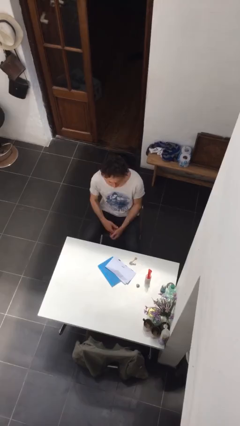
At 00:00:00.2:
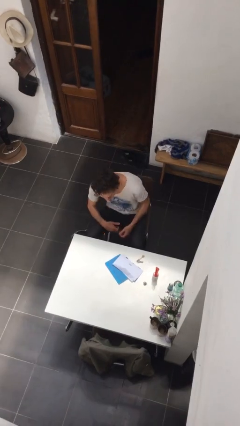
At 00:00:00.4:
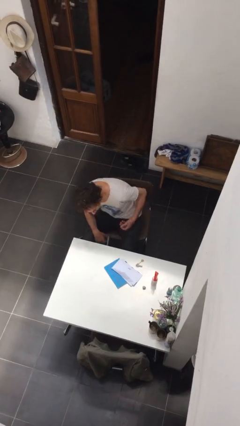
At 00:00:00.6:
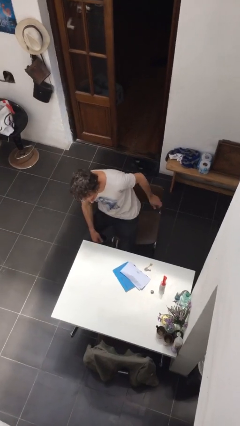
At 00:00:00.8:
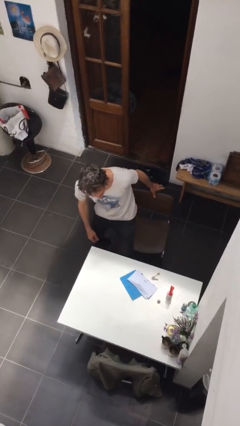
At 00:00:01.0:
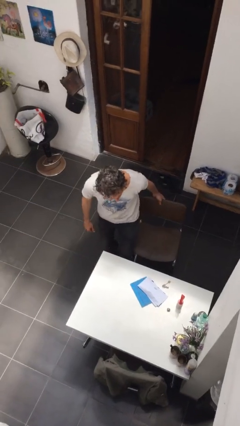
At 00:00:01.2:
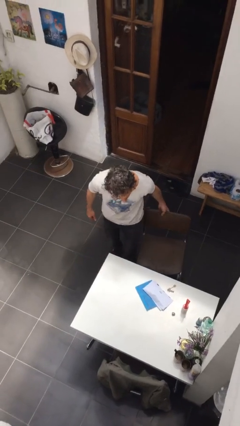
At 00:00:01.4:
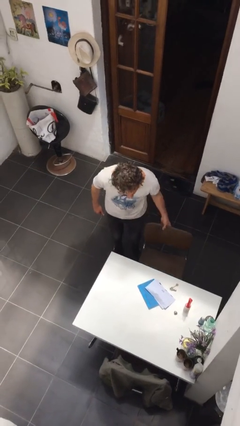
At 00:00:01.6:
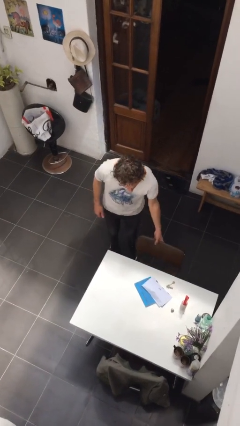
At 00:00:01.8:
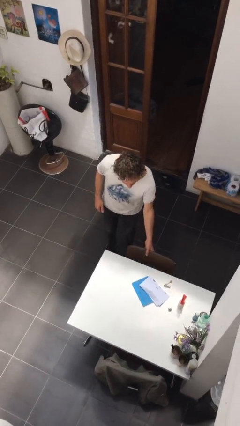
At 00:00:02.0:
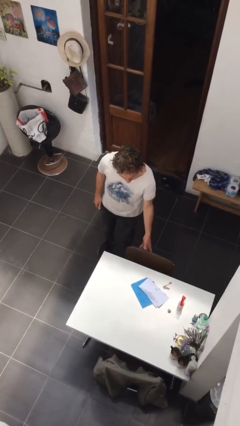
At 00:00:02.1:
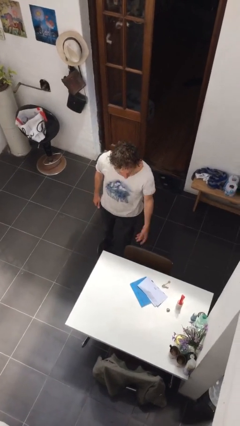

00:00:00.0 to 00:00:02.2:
person stands up

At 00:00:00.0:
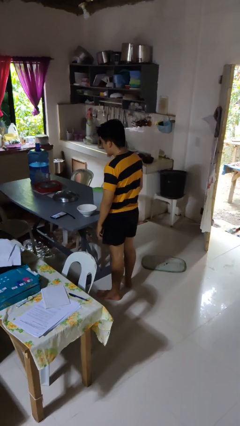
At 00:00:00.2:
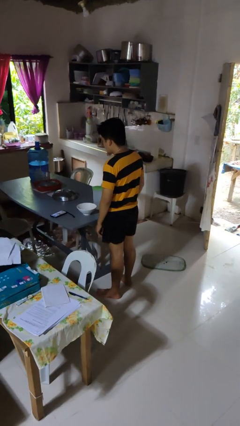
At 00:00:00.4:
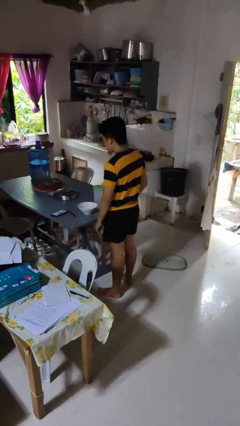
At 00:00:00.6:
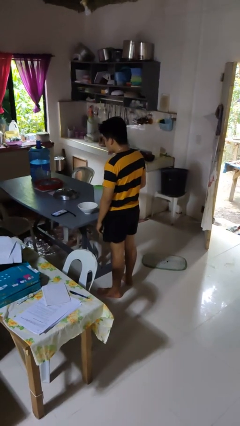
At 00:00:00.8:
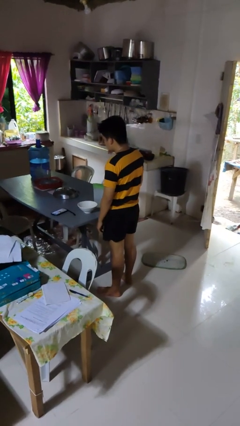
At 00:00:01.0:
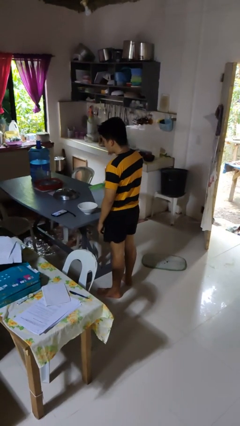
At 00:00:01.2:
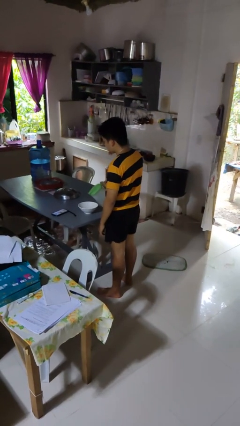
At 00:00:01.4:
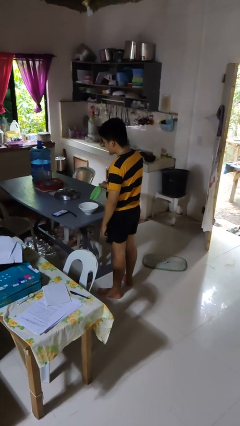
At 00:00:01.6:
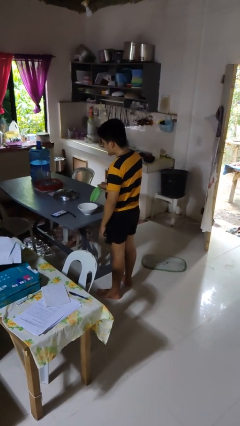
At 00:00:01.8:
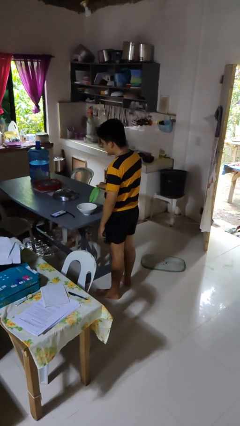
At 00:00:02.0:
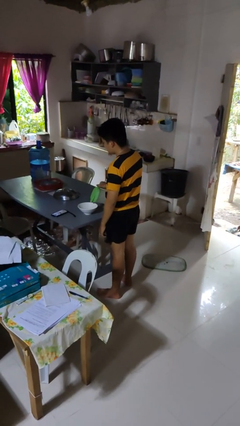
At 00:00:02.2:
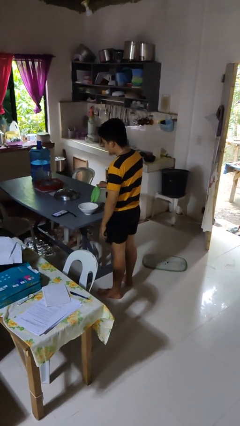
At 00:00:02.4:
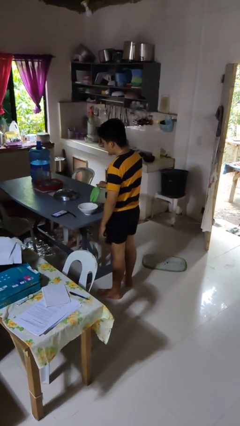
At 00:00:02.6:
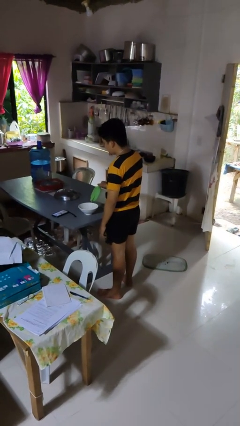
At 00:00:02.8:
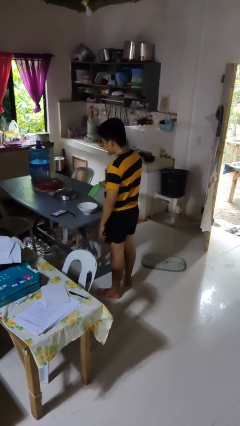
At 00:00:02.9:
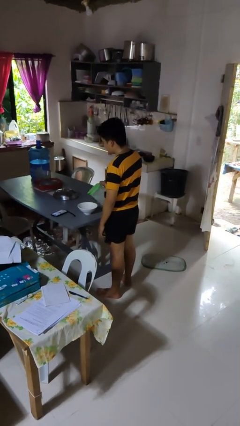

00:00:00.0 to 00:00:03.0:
person pours into bowl

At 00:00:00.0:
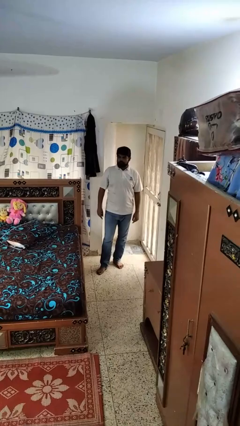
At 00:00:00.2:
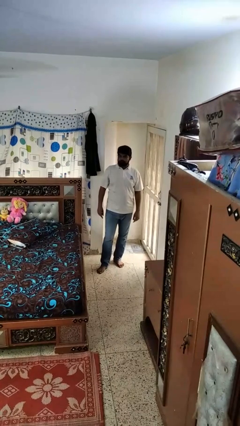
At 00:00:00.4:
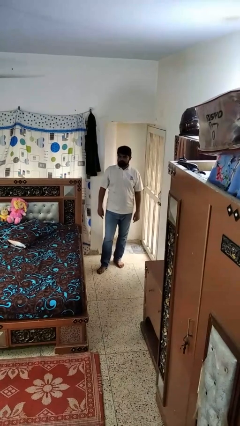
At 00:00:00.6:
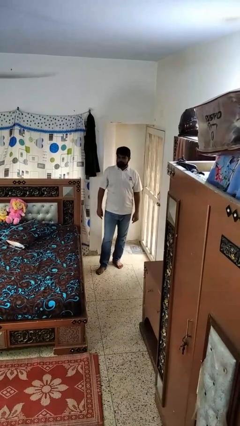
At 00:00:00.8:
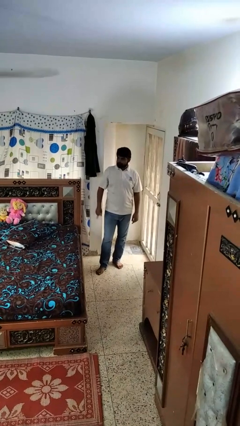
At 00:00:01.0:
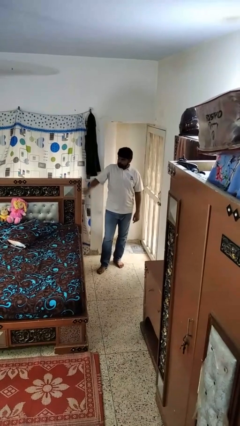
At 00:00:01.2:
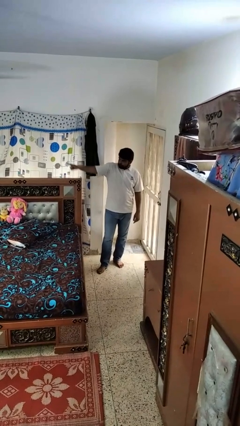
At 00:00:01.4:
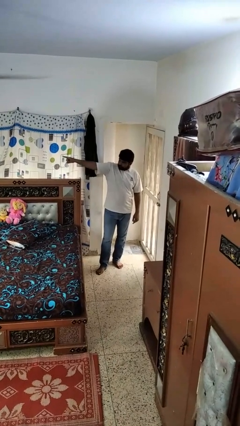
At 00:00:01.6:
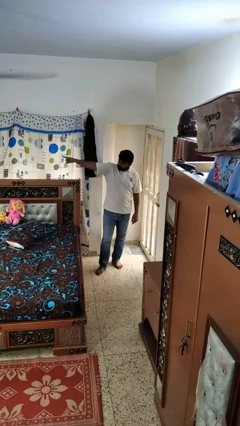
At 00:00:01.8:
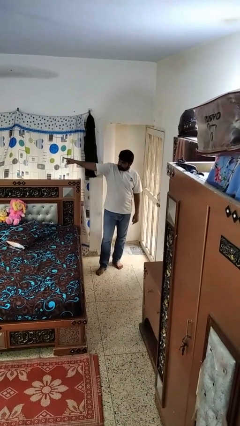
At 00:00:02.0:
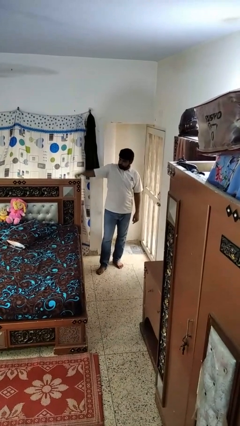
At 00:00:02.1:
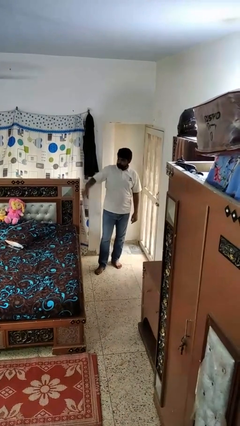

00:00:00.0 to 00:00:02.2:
person points at person

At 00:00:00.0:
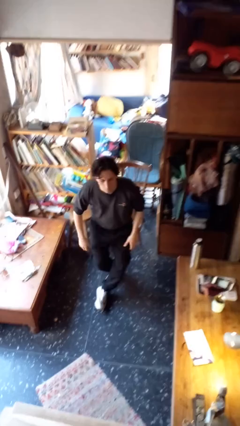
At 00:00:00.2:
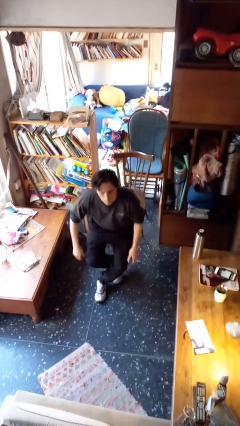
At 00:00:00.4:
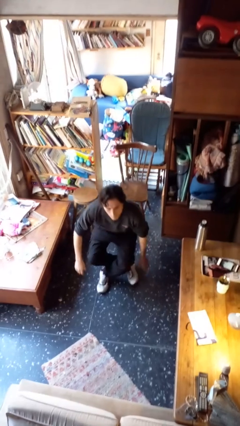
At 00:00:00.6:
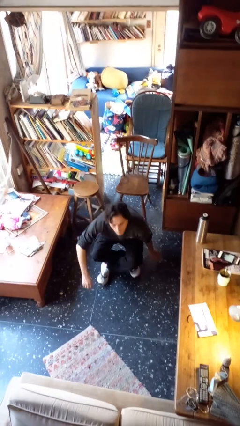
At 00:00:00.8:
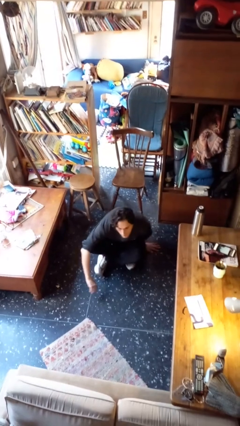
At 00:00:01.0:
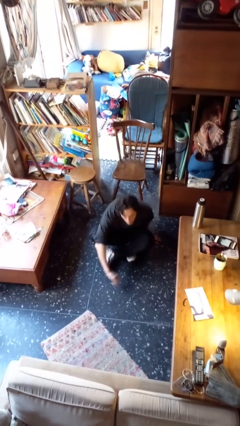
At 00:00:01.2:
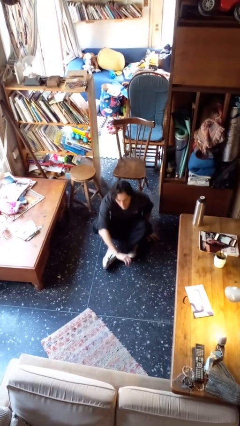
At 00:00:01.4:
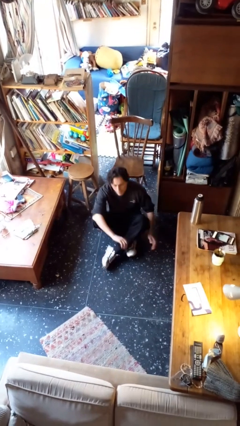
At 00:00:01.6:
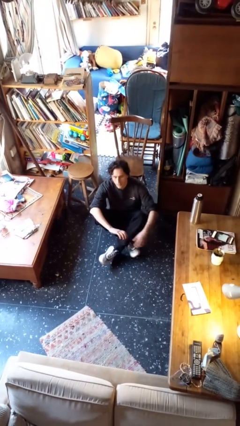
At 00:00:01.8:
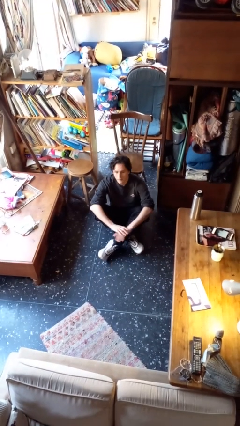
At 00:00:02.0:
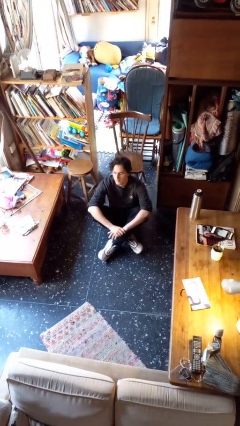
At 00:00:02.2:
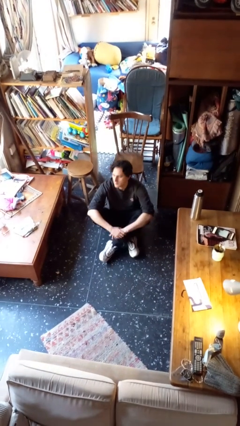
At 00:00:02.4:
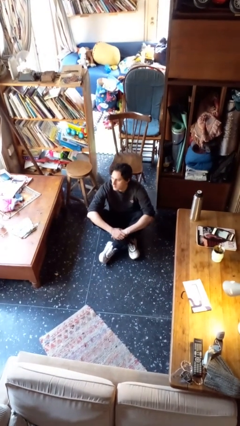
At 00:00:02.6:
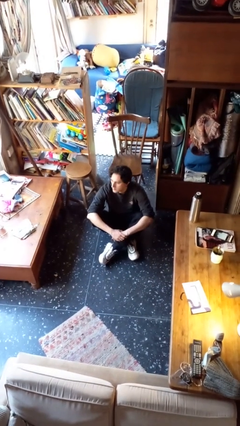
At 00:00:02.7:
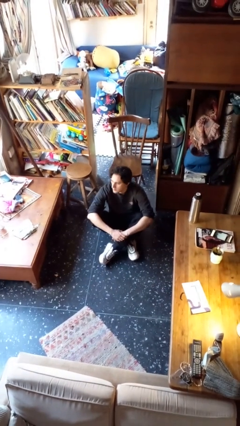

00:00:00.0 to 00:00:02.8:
person sits crisscross

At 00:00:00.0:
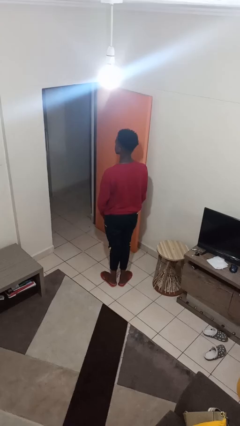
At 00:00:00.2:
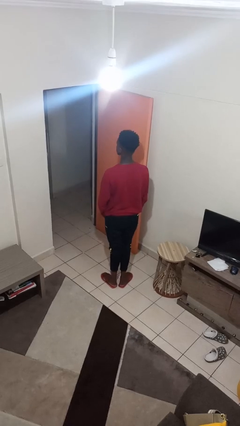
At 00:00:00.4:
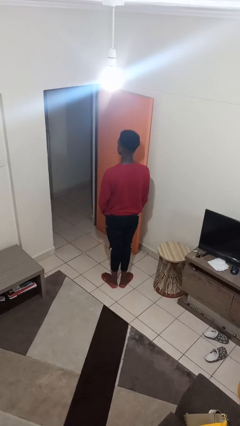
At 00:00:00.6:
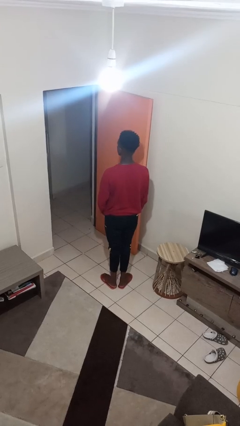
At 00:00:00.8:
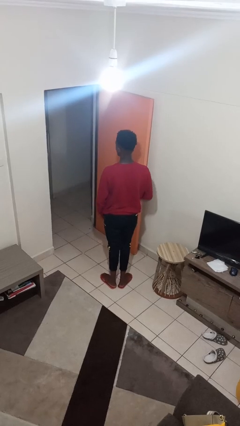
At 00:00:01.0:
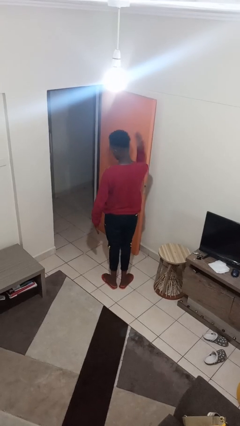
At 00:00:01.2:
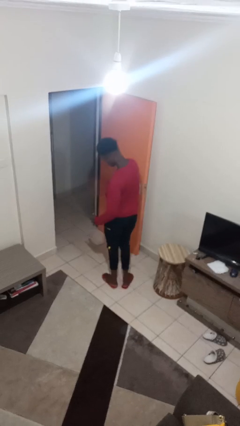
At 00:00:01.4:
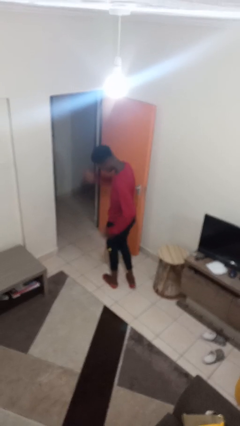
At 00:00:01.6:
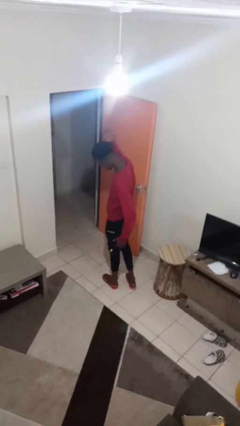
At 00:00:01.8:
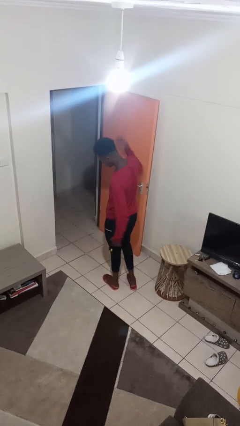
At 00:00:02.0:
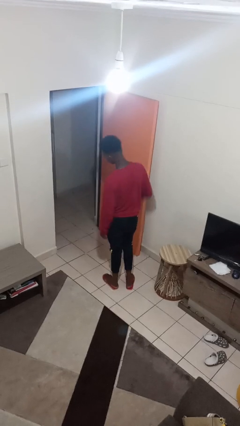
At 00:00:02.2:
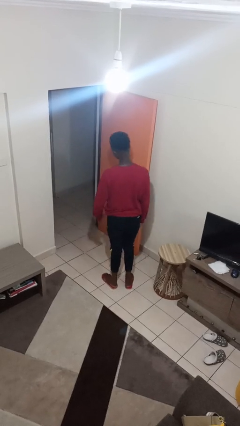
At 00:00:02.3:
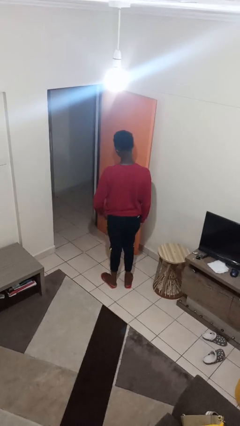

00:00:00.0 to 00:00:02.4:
person karate chop

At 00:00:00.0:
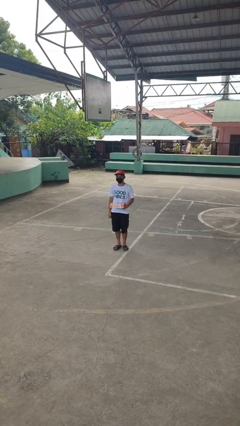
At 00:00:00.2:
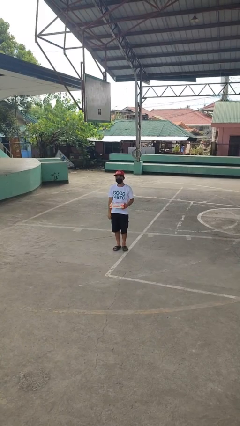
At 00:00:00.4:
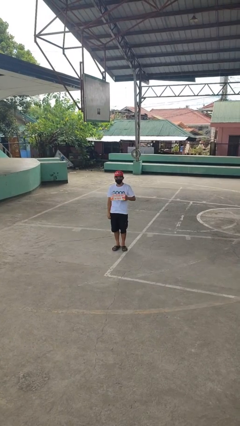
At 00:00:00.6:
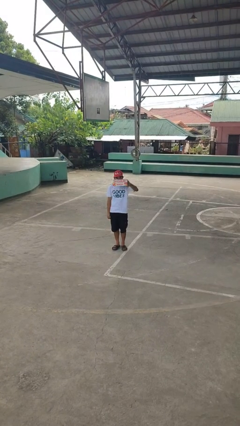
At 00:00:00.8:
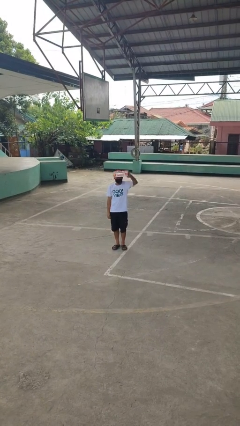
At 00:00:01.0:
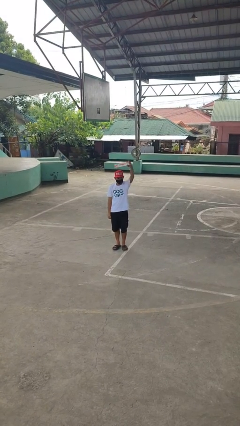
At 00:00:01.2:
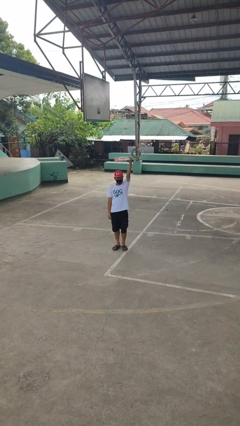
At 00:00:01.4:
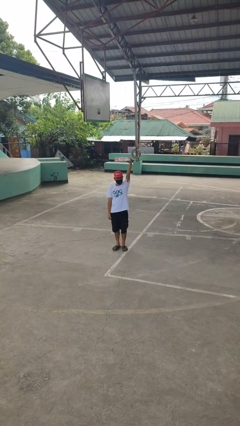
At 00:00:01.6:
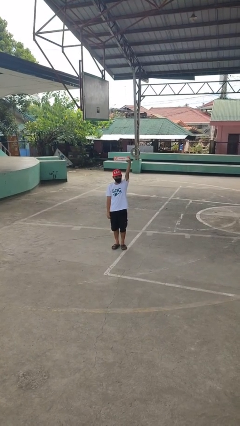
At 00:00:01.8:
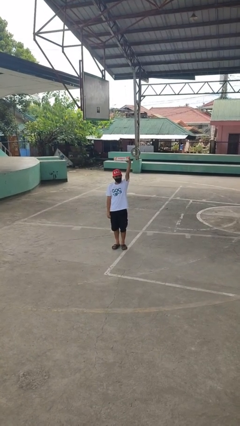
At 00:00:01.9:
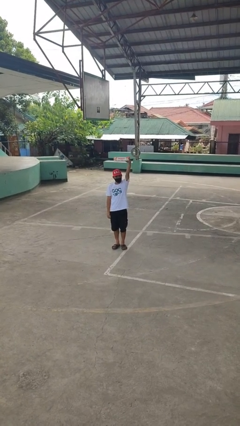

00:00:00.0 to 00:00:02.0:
person holds object above head

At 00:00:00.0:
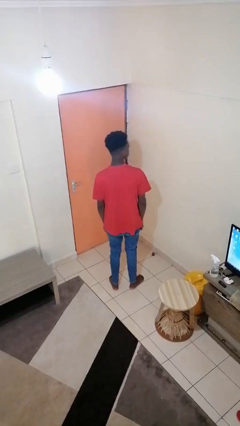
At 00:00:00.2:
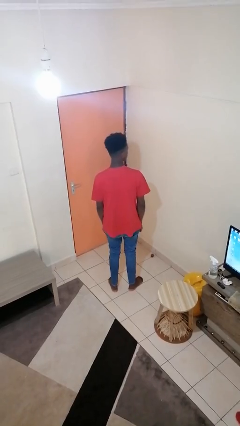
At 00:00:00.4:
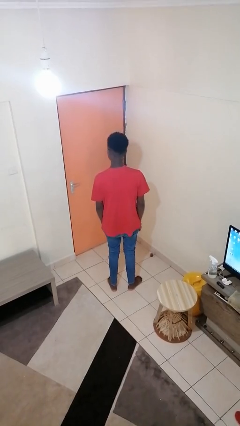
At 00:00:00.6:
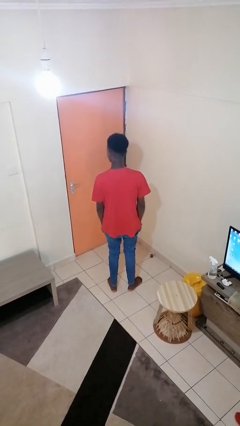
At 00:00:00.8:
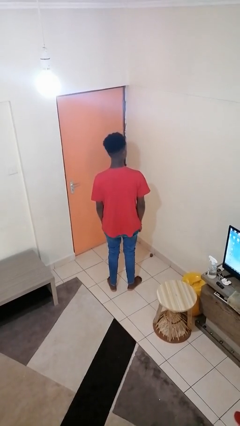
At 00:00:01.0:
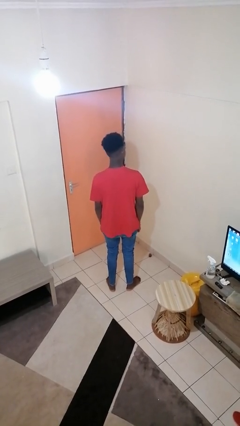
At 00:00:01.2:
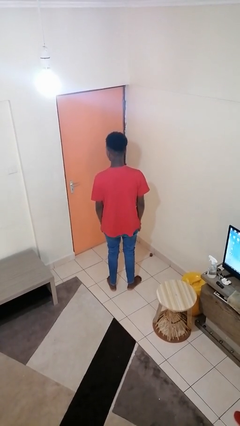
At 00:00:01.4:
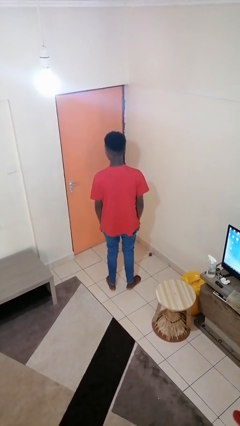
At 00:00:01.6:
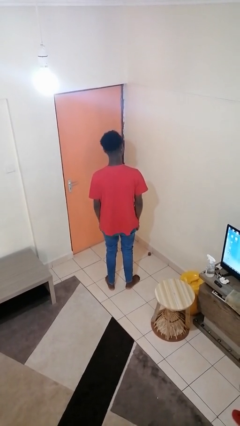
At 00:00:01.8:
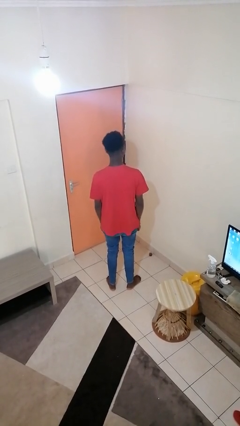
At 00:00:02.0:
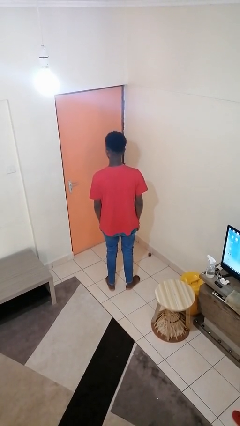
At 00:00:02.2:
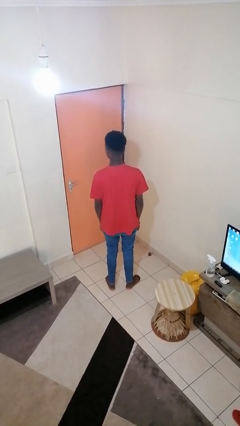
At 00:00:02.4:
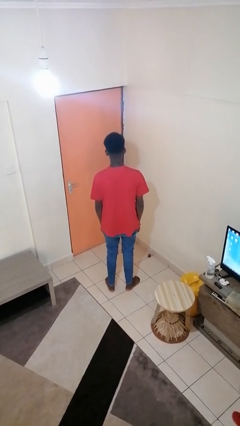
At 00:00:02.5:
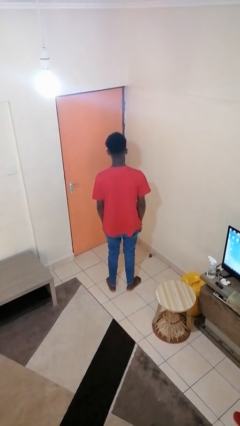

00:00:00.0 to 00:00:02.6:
person shakes head
